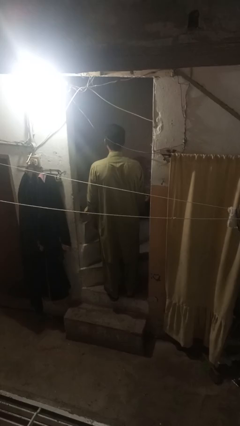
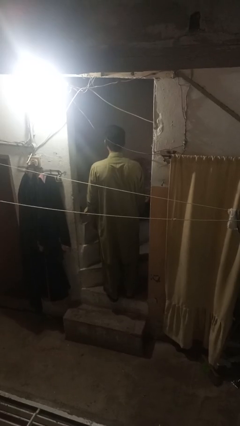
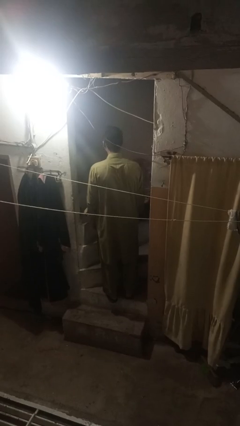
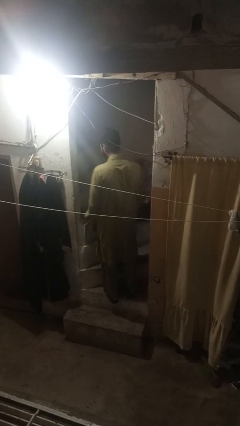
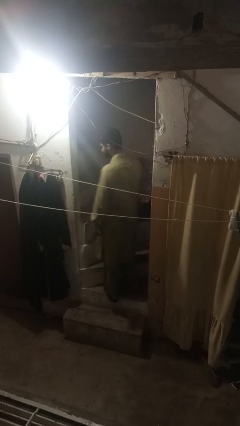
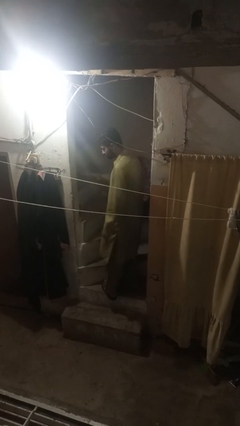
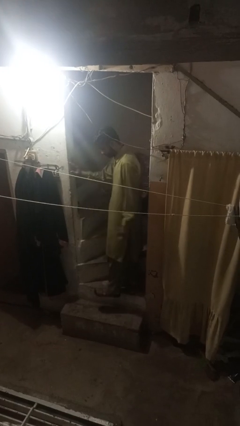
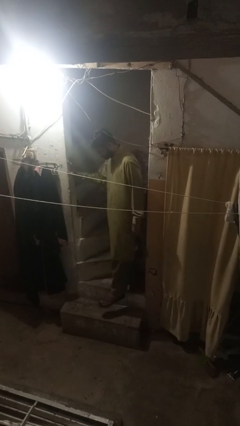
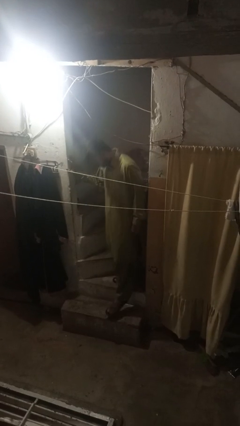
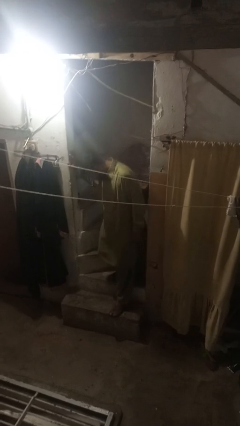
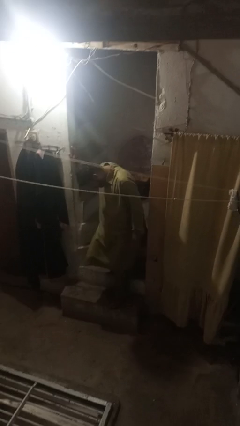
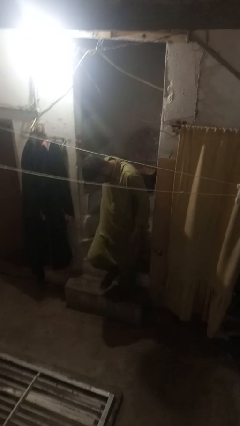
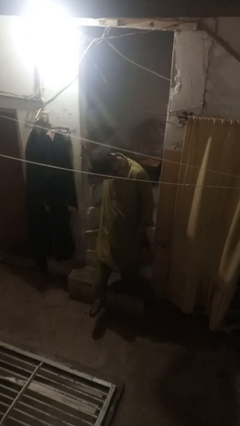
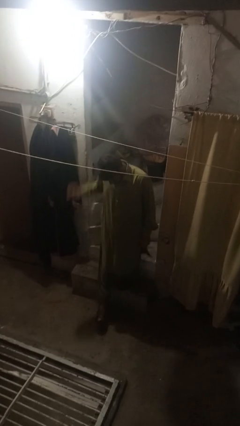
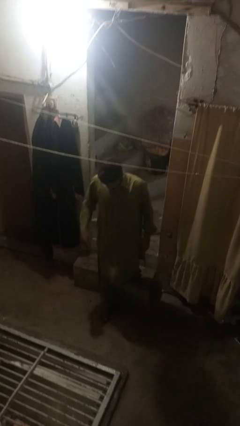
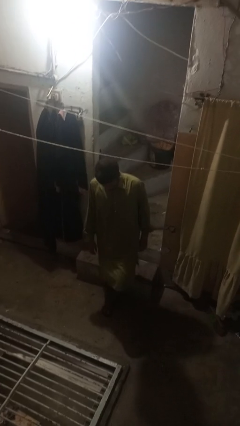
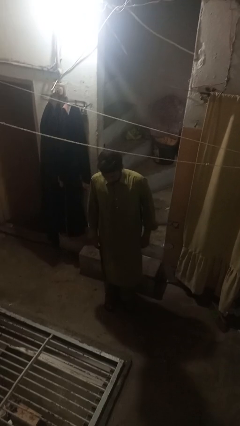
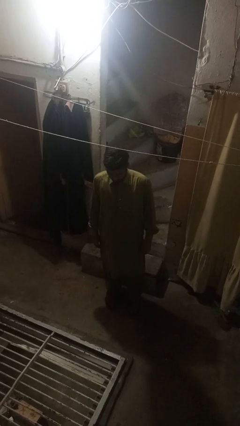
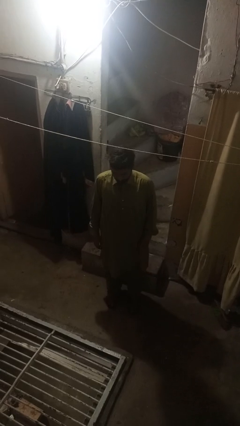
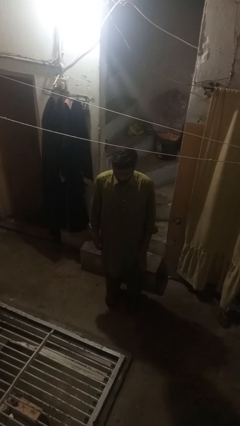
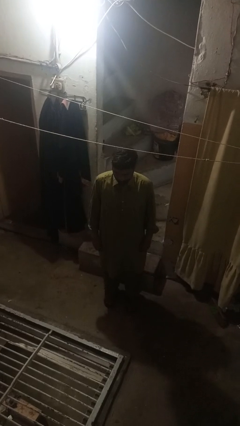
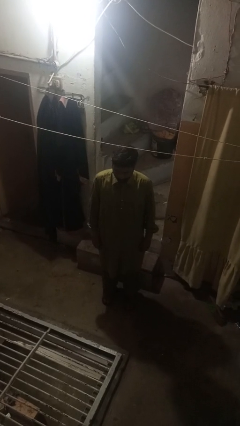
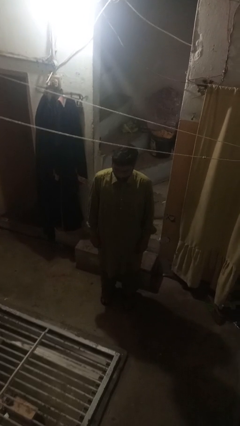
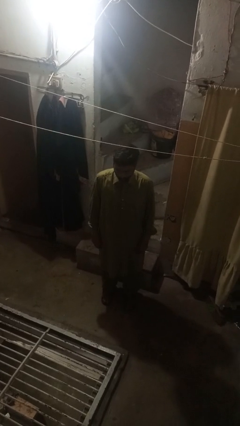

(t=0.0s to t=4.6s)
person climbs down stairs

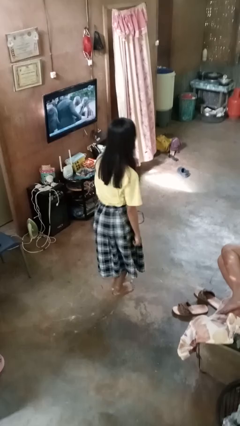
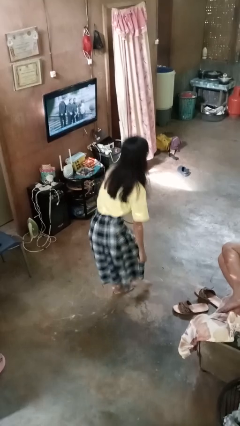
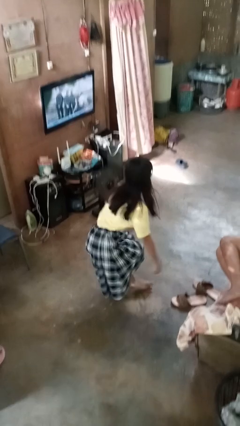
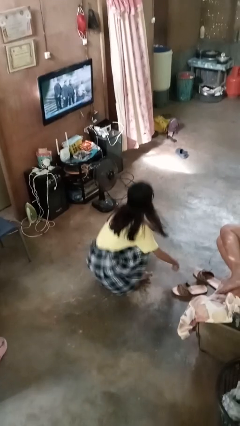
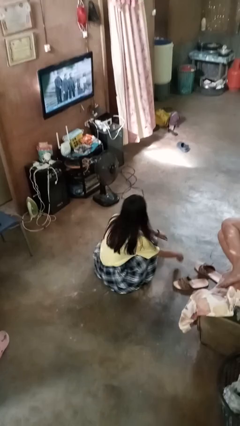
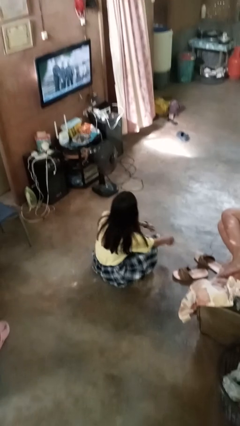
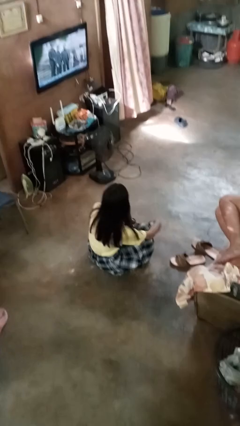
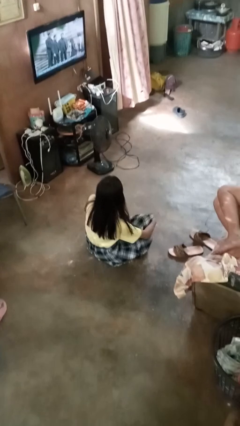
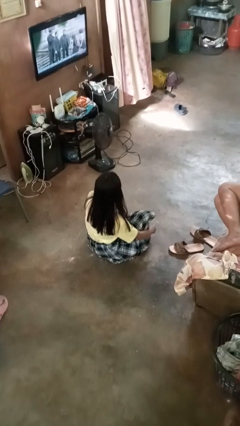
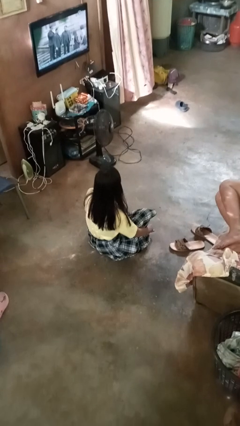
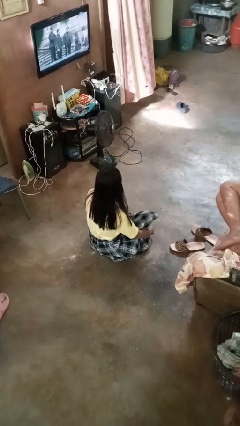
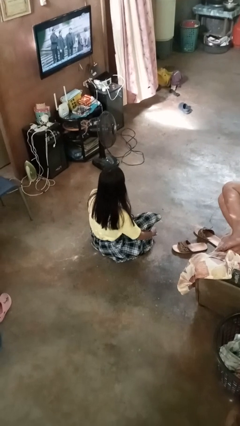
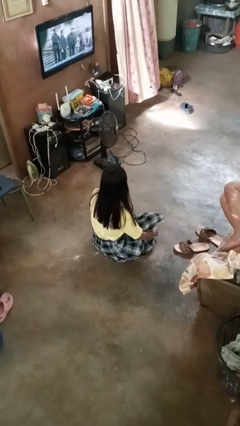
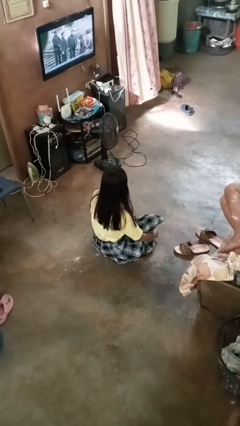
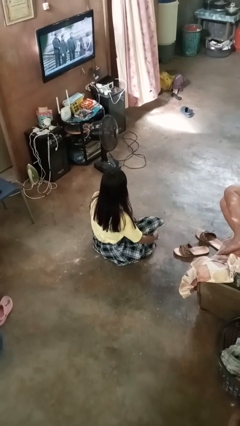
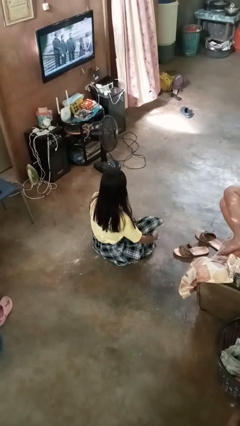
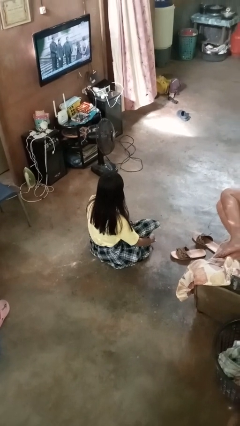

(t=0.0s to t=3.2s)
person sits crisscross

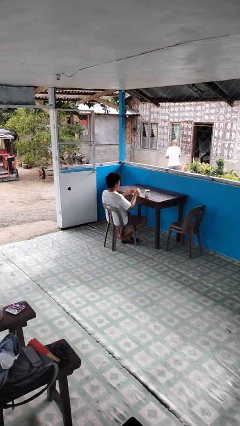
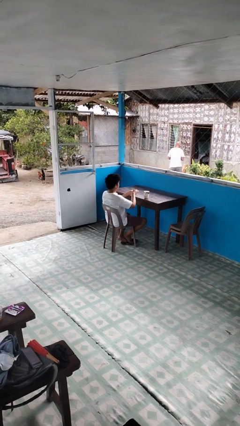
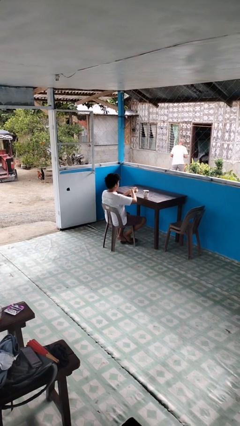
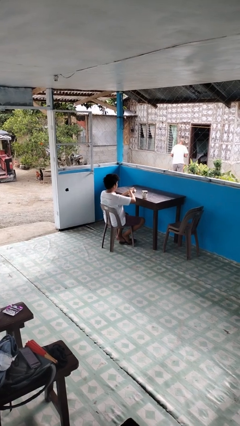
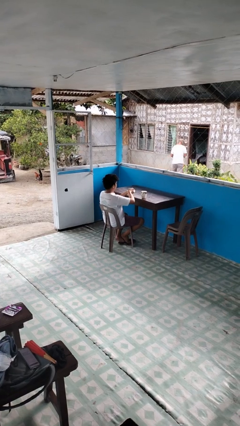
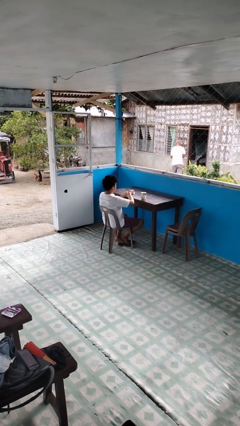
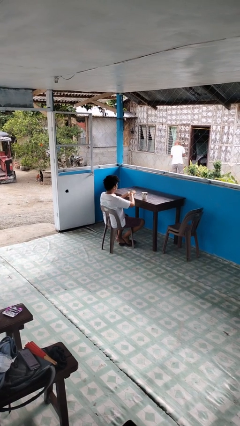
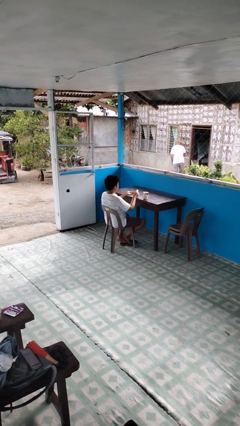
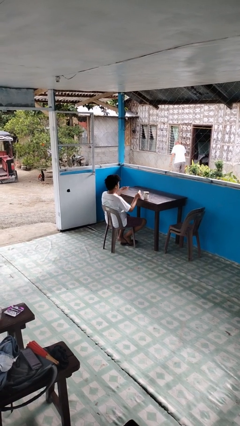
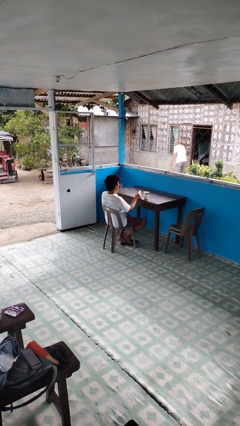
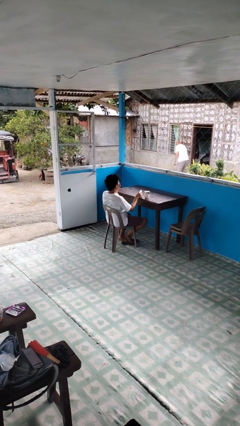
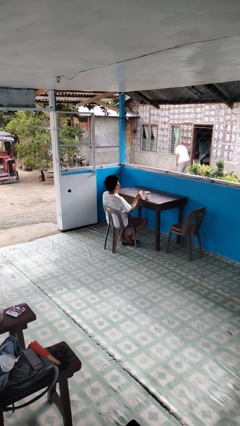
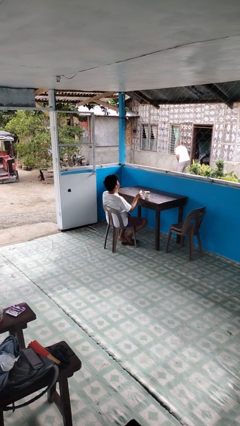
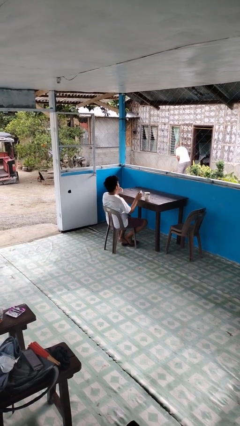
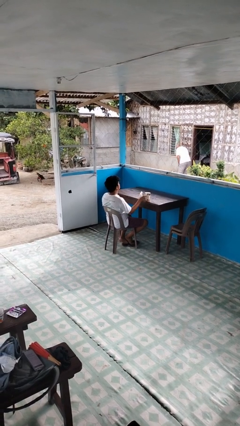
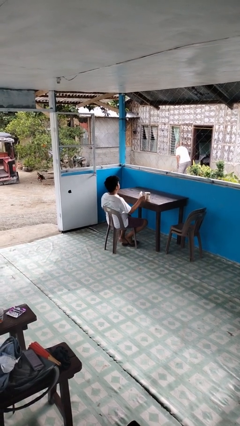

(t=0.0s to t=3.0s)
person takes medicine pills

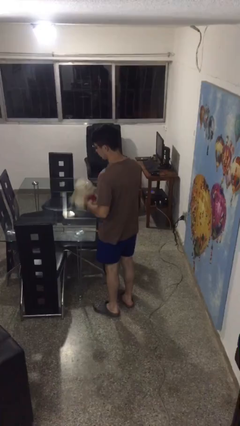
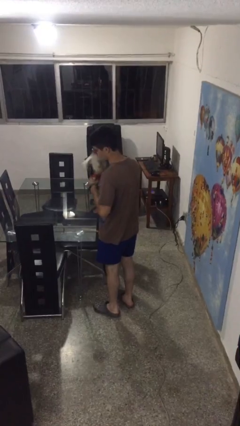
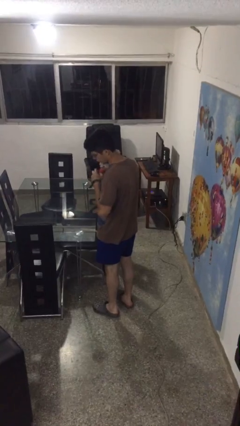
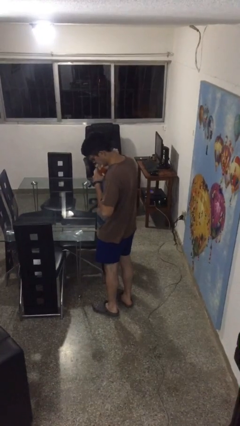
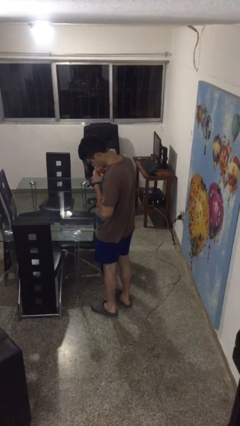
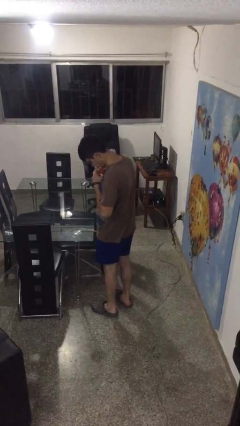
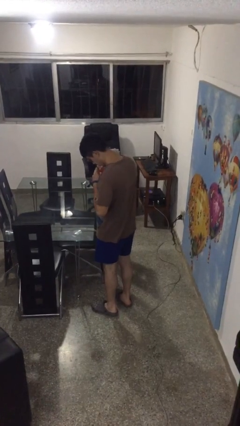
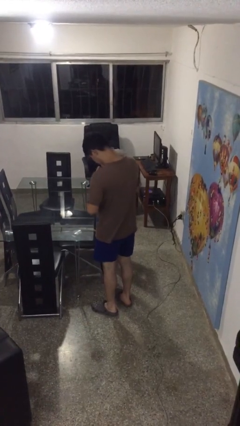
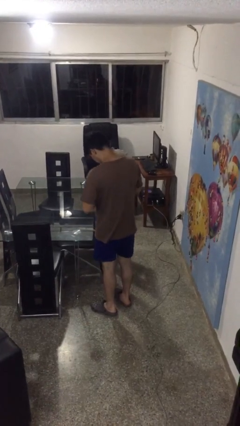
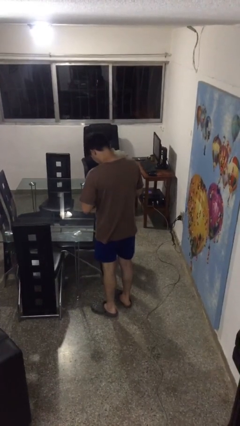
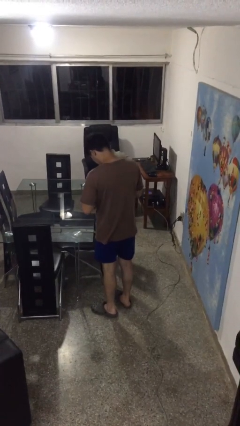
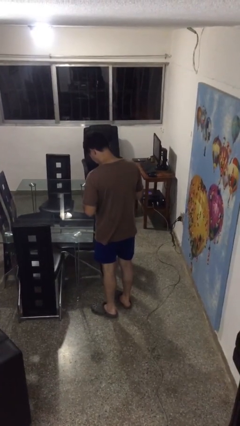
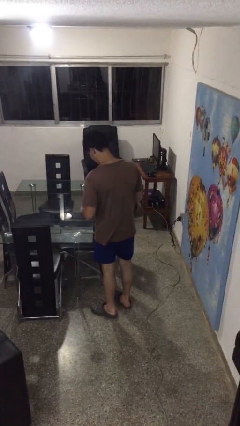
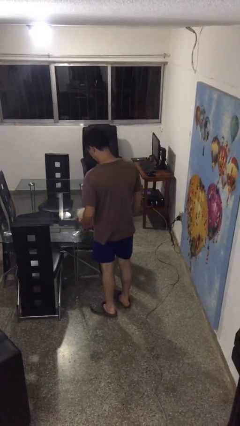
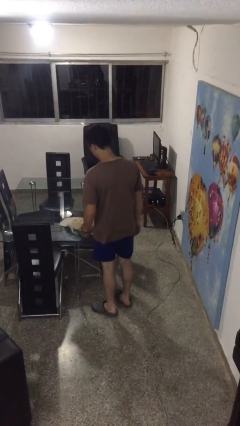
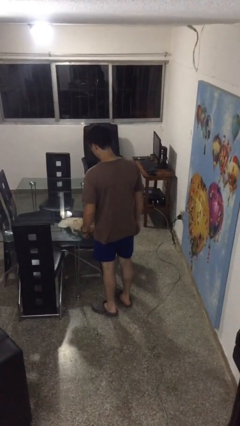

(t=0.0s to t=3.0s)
person hugs stuffed animal

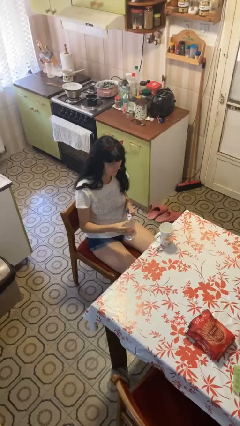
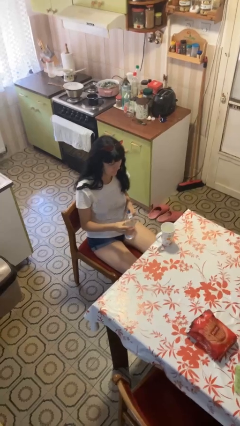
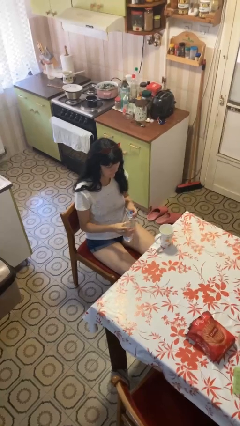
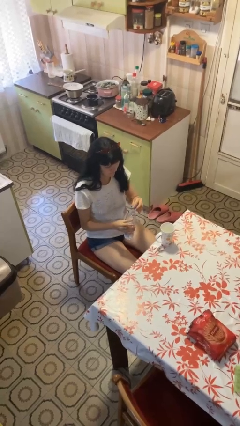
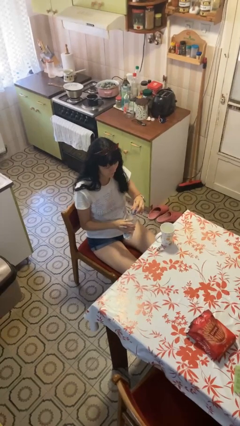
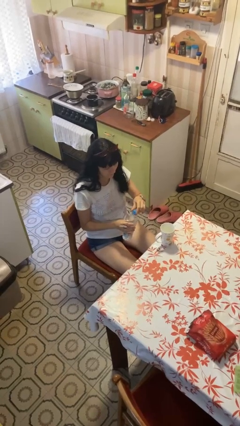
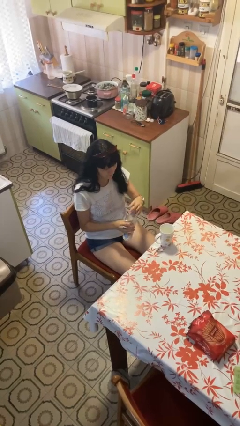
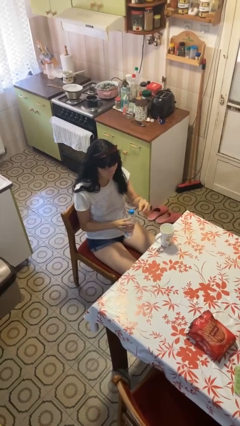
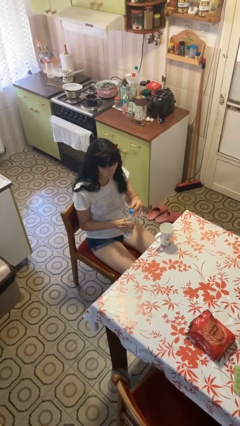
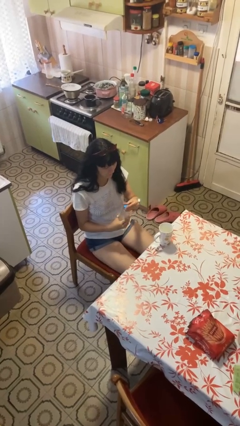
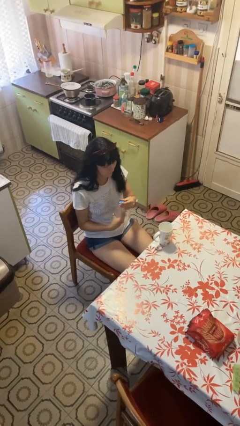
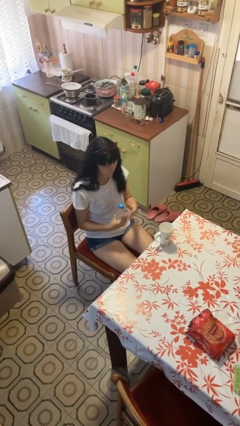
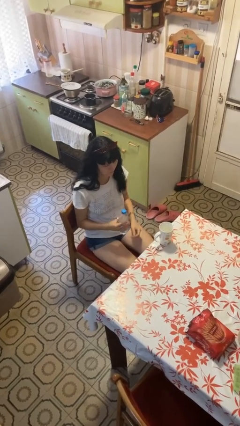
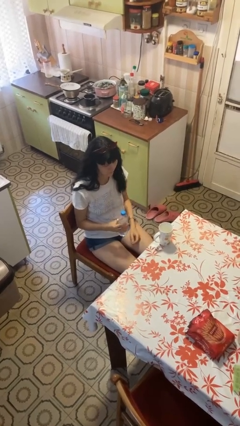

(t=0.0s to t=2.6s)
person screws lid to bottle

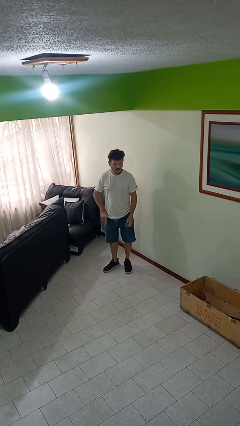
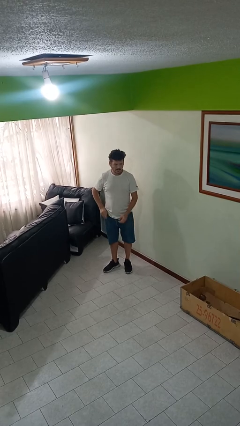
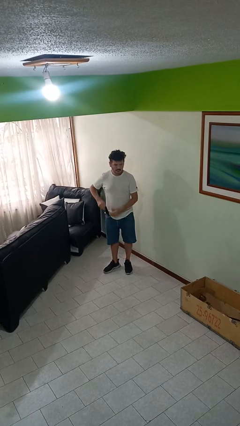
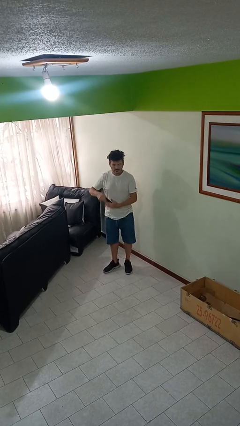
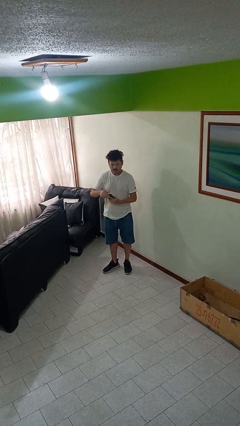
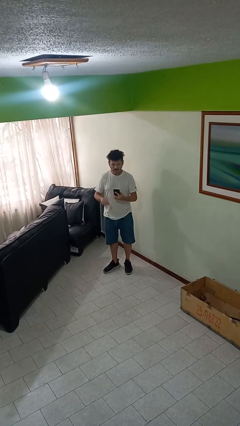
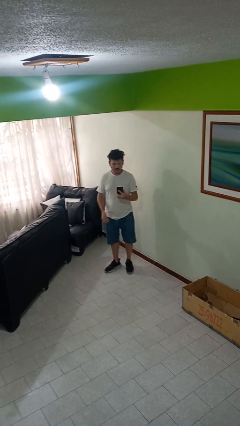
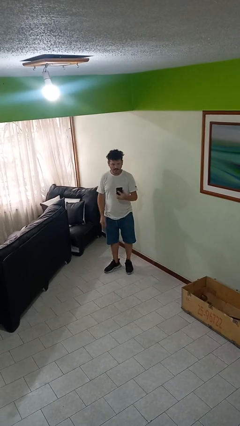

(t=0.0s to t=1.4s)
person takes phone from pocket
